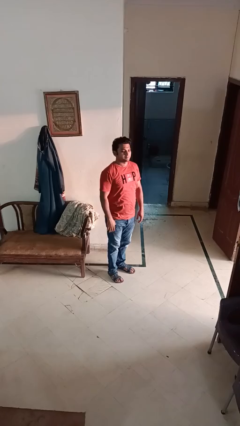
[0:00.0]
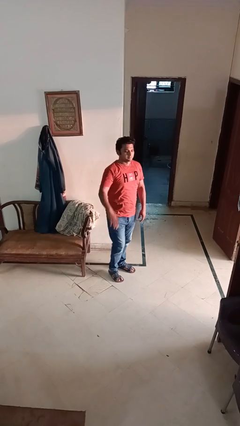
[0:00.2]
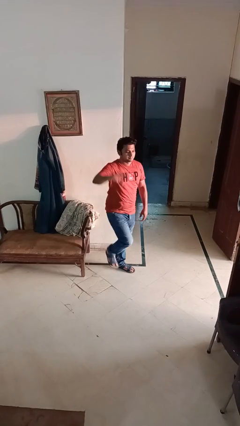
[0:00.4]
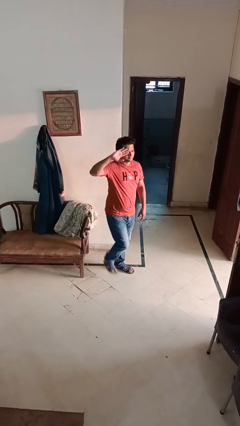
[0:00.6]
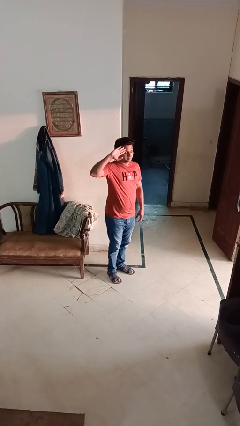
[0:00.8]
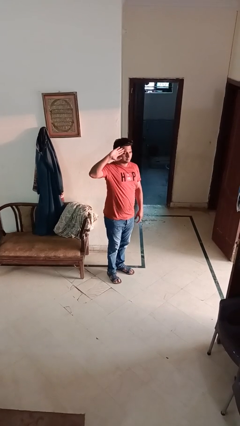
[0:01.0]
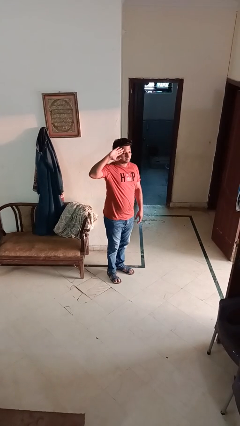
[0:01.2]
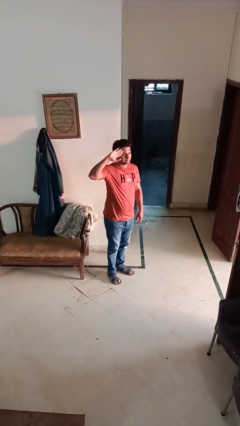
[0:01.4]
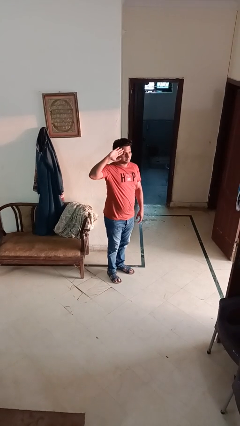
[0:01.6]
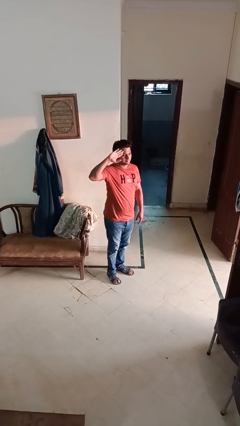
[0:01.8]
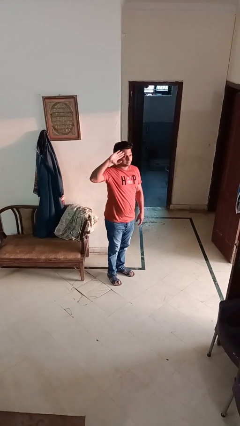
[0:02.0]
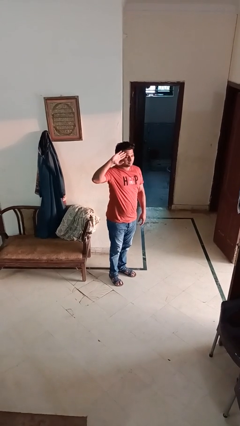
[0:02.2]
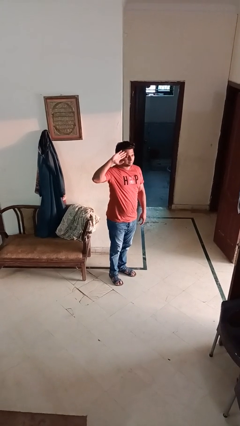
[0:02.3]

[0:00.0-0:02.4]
person salutes

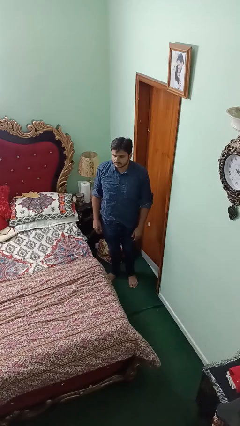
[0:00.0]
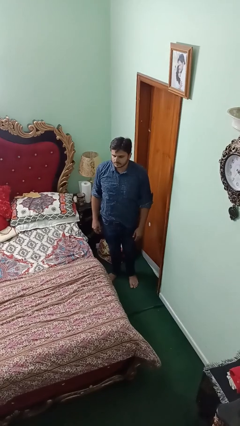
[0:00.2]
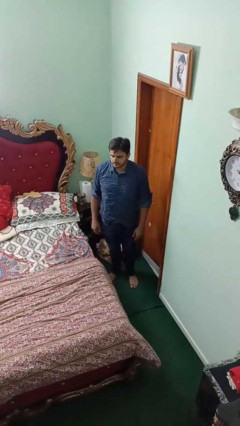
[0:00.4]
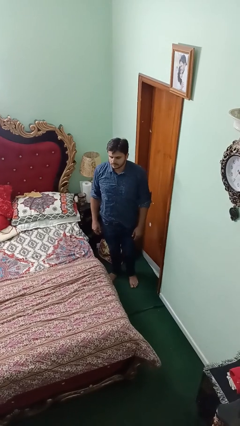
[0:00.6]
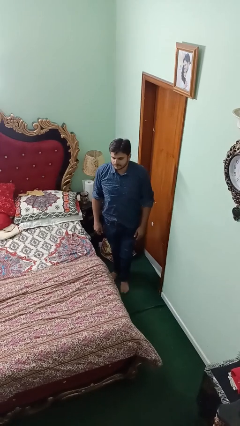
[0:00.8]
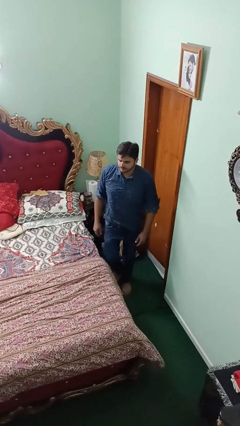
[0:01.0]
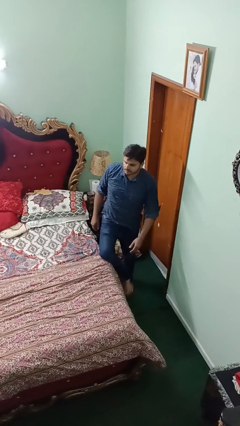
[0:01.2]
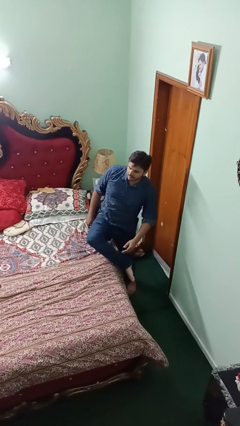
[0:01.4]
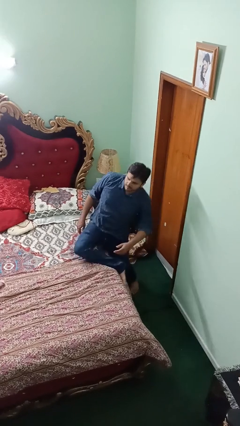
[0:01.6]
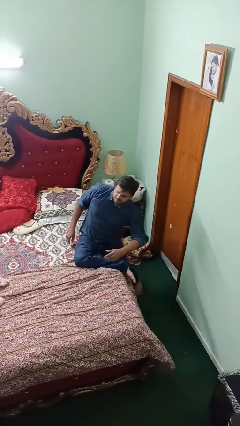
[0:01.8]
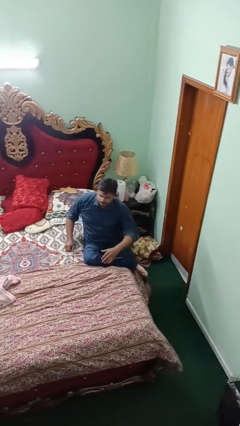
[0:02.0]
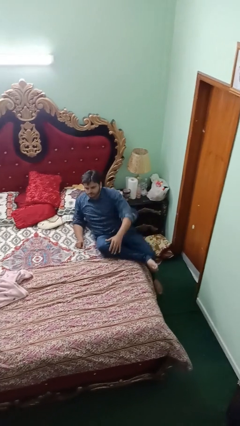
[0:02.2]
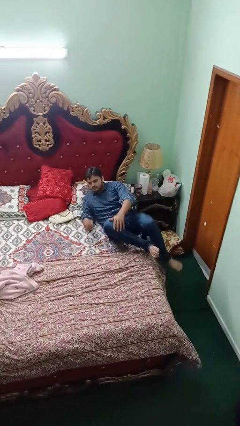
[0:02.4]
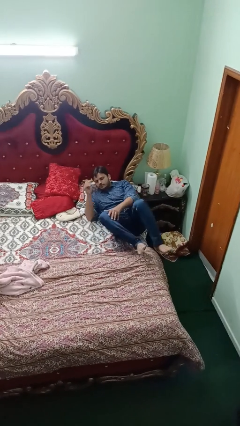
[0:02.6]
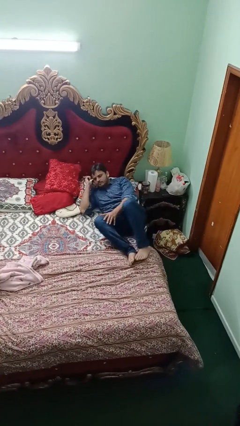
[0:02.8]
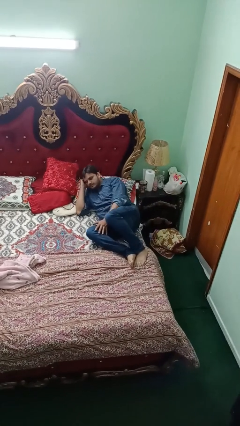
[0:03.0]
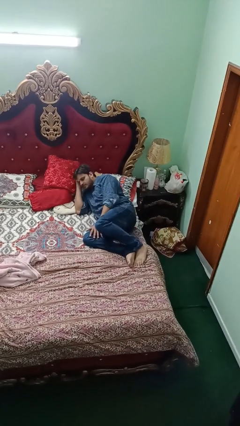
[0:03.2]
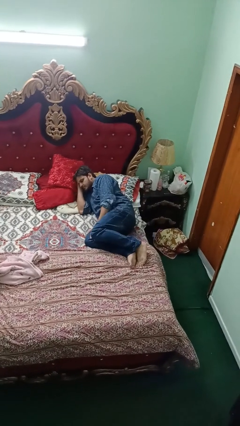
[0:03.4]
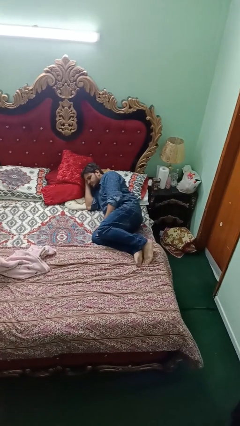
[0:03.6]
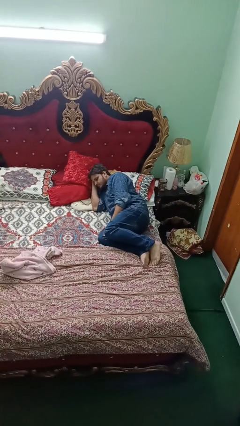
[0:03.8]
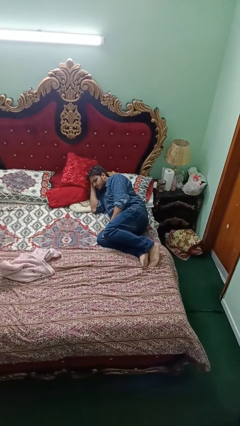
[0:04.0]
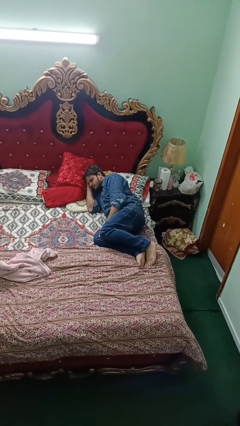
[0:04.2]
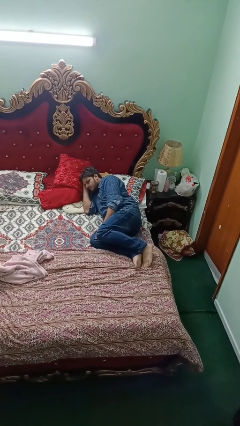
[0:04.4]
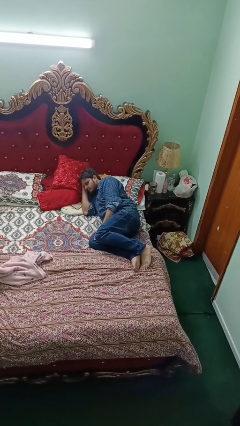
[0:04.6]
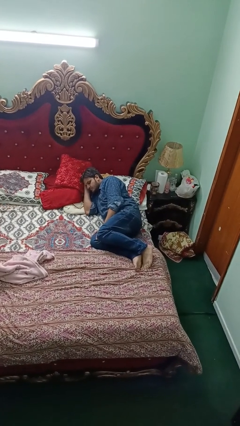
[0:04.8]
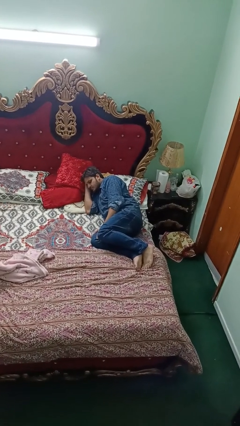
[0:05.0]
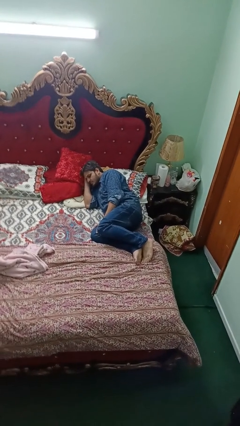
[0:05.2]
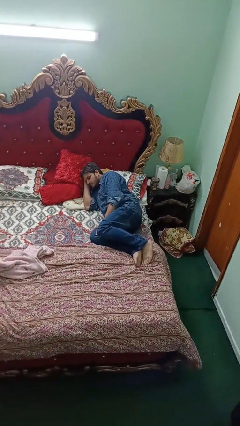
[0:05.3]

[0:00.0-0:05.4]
person lies down on bed

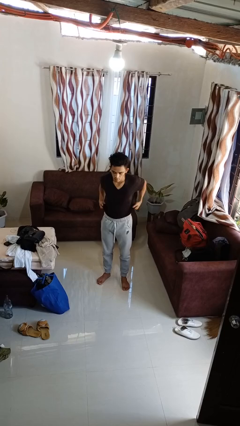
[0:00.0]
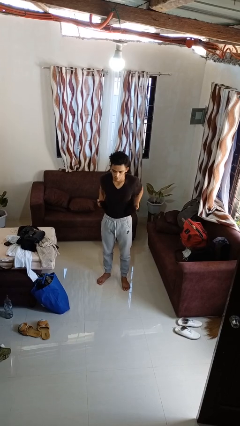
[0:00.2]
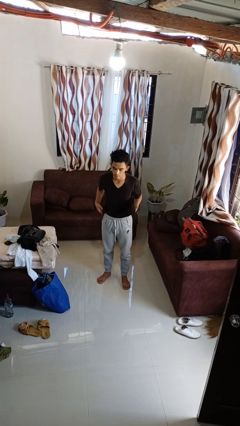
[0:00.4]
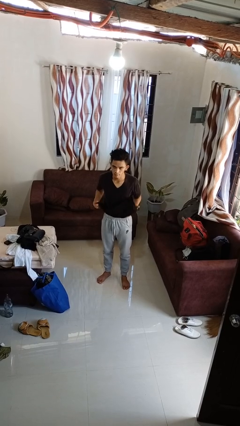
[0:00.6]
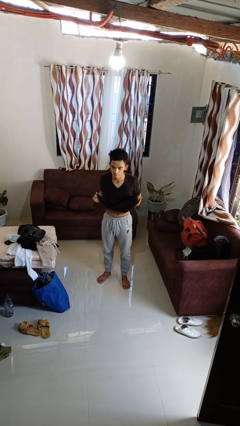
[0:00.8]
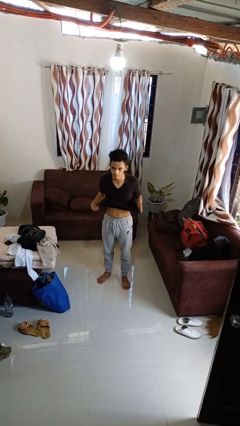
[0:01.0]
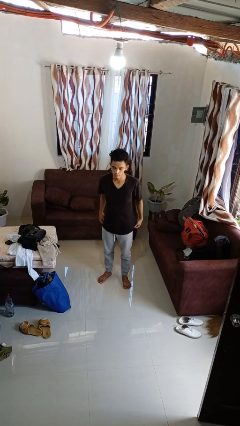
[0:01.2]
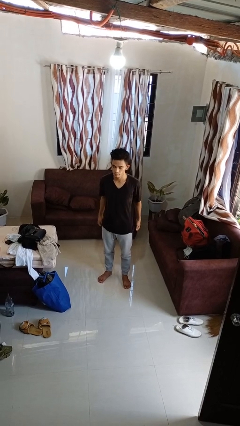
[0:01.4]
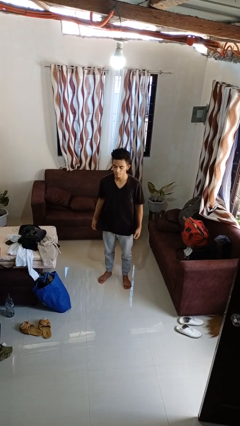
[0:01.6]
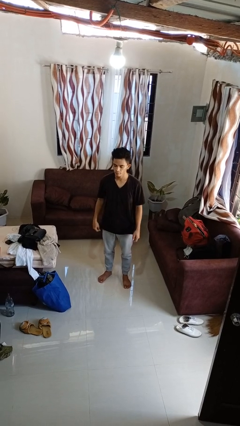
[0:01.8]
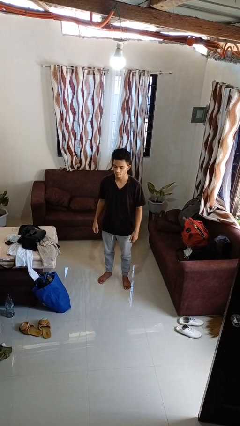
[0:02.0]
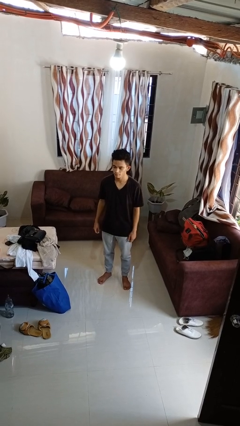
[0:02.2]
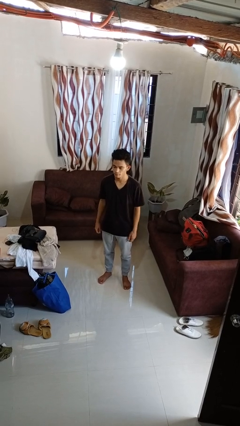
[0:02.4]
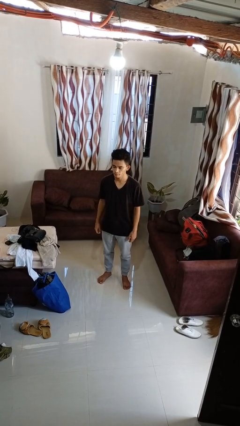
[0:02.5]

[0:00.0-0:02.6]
person untucks shirt

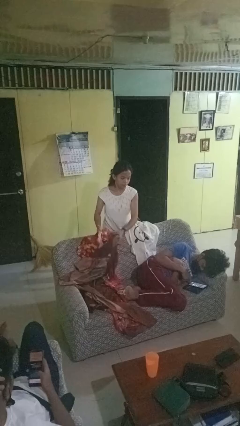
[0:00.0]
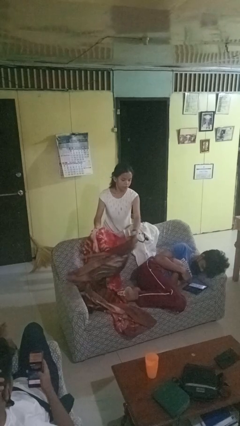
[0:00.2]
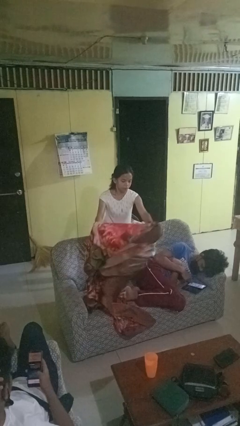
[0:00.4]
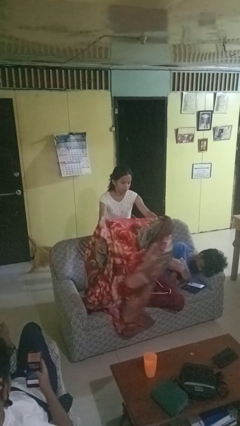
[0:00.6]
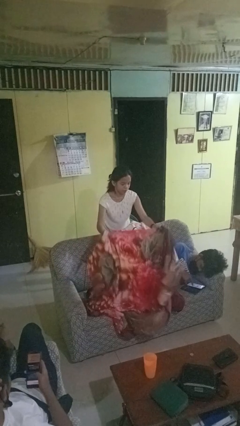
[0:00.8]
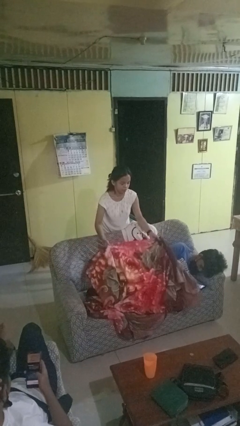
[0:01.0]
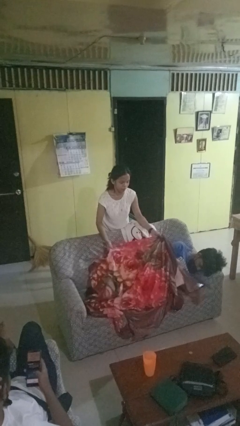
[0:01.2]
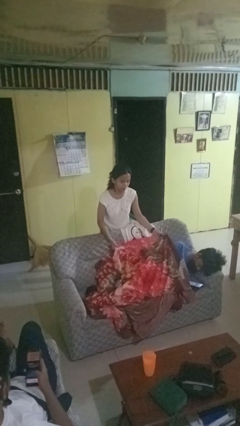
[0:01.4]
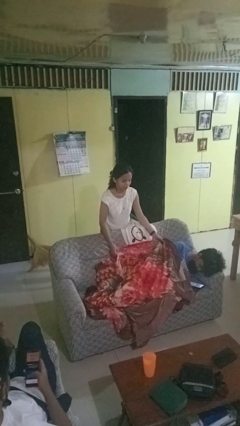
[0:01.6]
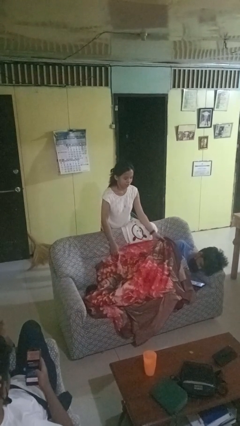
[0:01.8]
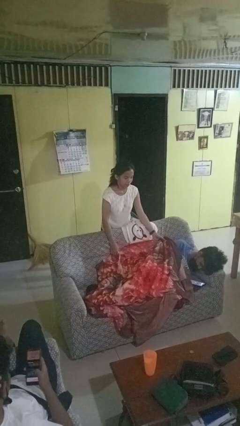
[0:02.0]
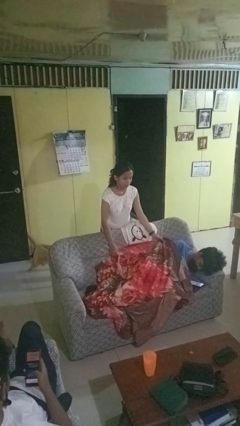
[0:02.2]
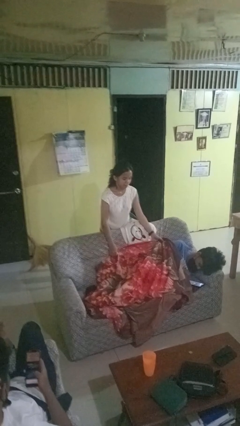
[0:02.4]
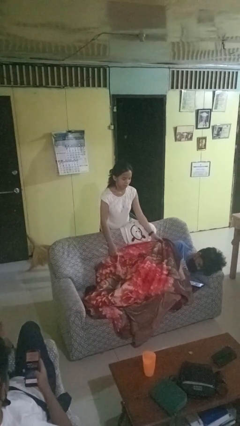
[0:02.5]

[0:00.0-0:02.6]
person covers friend with blanket

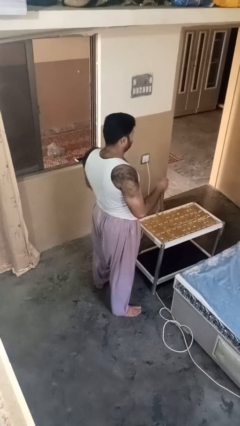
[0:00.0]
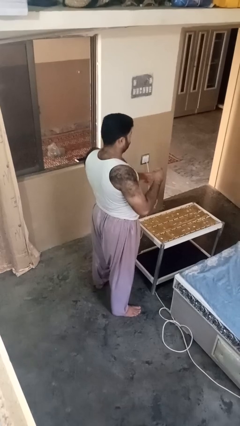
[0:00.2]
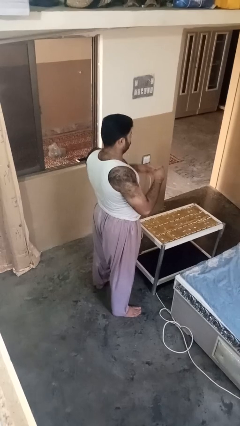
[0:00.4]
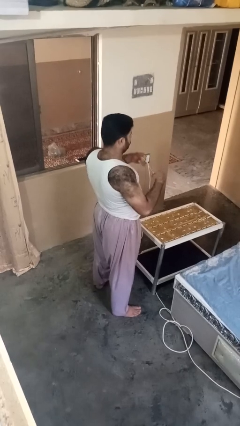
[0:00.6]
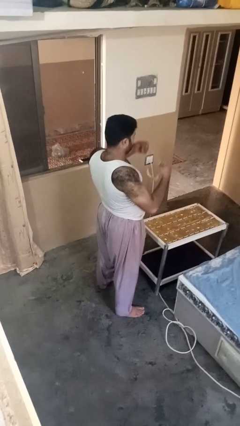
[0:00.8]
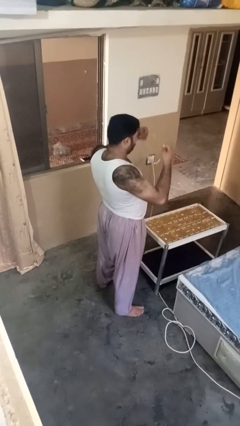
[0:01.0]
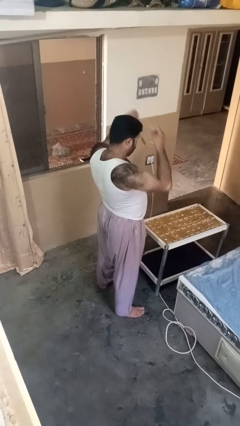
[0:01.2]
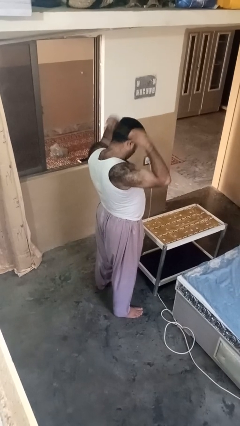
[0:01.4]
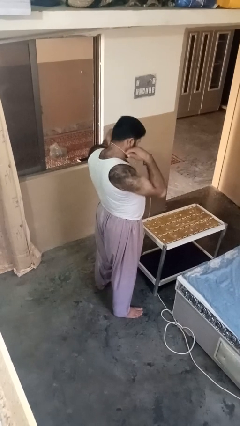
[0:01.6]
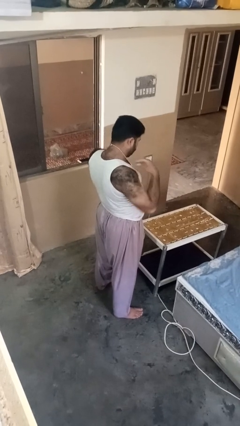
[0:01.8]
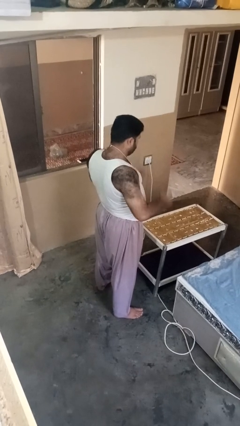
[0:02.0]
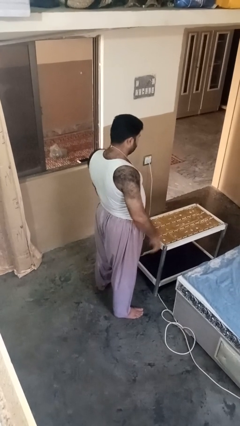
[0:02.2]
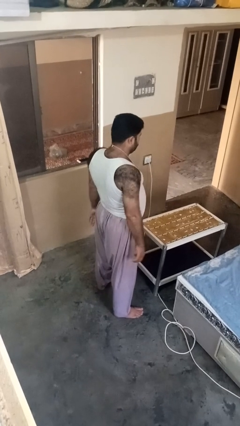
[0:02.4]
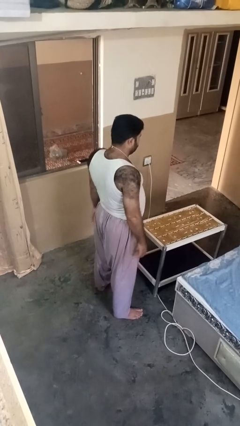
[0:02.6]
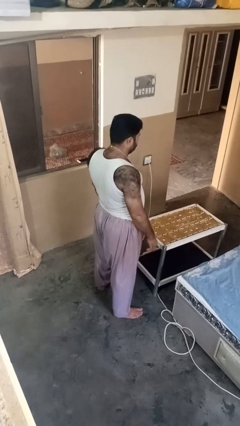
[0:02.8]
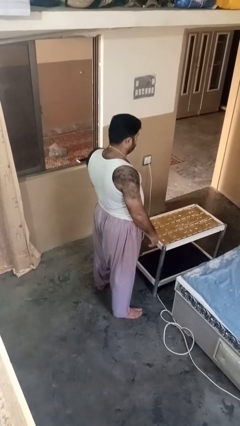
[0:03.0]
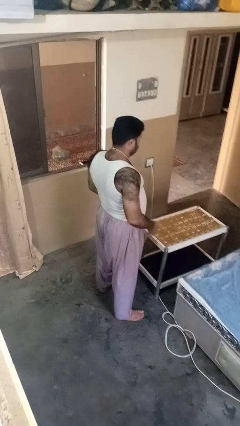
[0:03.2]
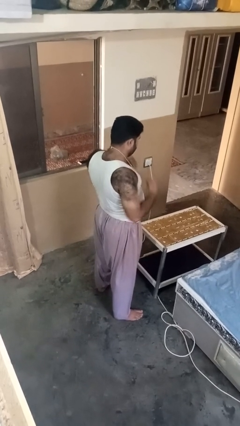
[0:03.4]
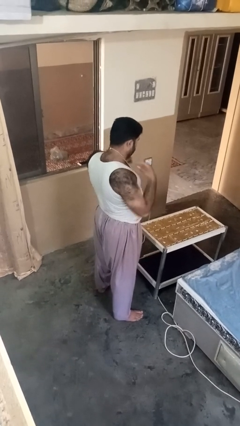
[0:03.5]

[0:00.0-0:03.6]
person puts on necklace
